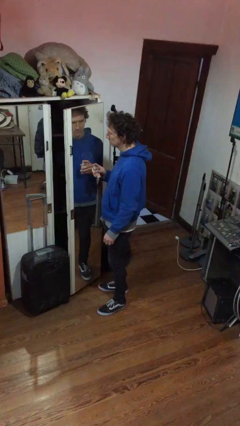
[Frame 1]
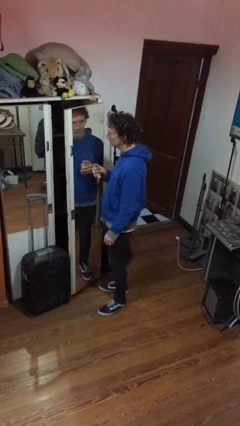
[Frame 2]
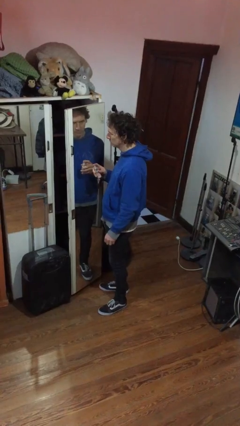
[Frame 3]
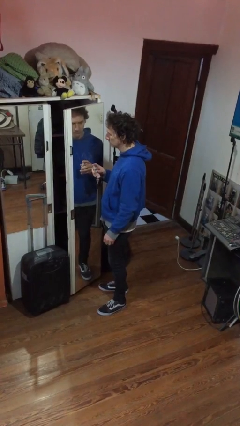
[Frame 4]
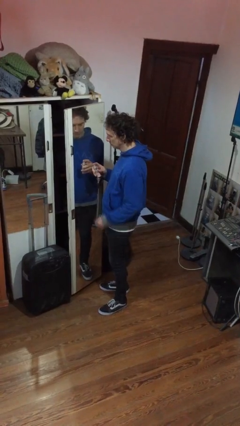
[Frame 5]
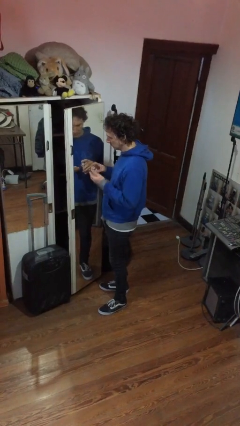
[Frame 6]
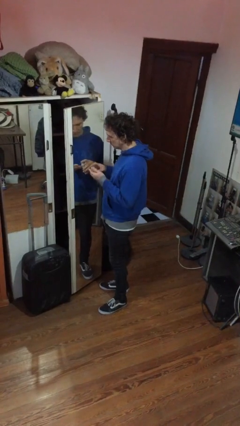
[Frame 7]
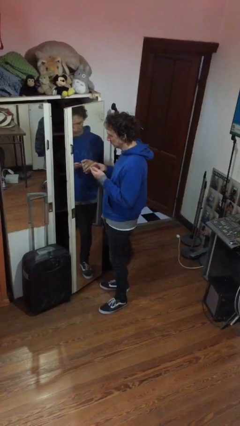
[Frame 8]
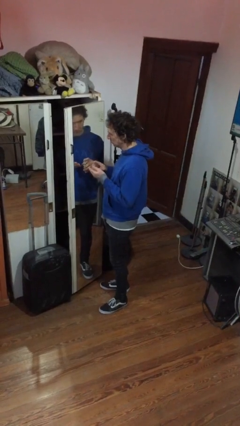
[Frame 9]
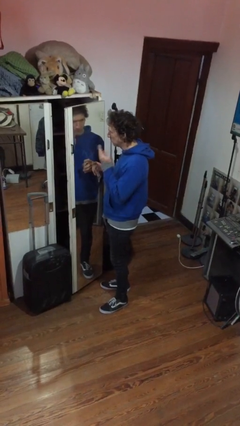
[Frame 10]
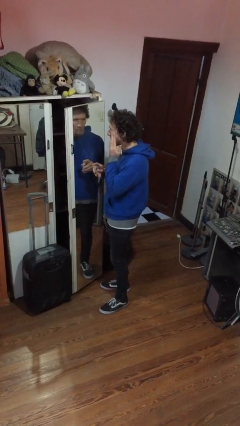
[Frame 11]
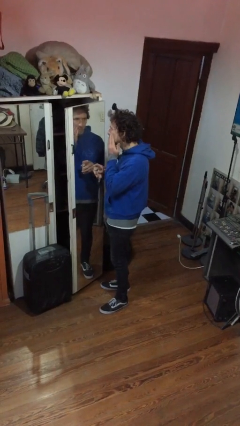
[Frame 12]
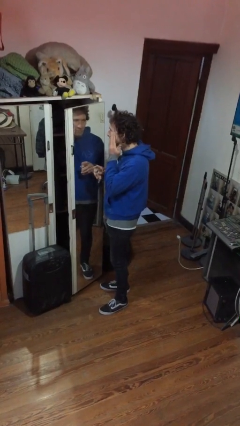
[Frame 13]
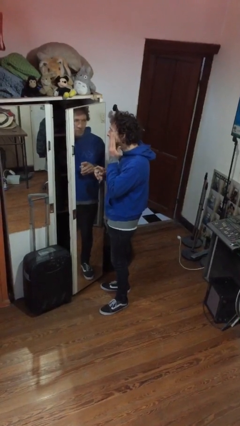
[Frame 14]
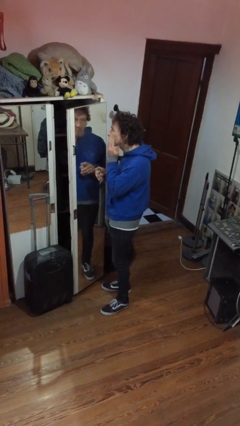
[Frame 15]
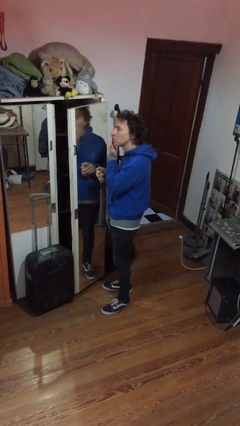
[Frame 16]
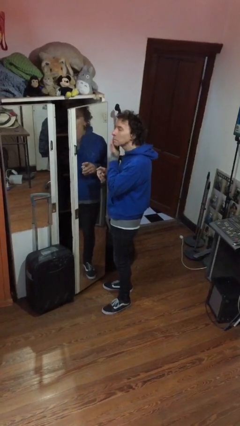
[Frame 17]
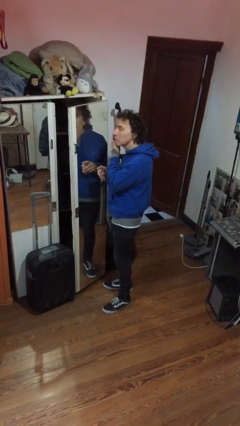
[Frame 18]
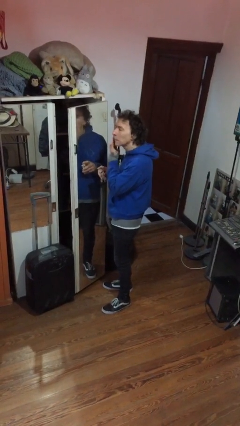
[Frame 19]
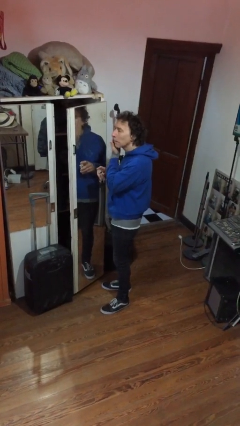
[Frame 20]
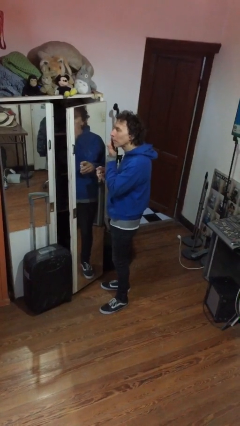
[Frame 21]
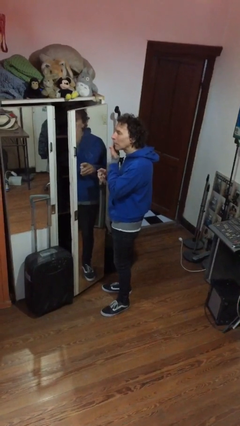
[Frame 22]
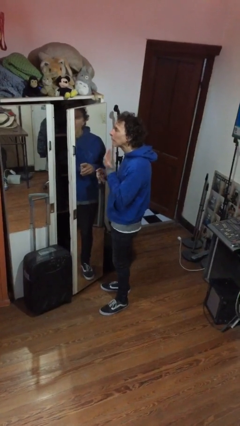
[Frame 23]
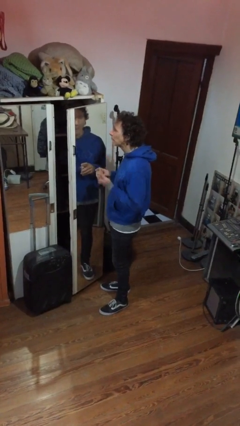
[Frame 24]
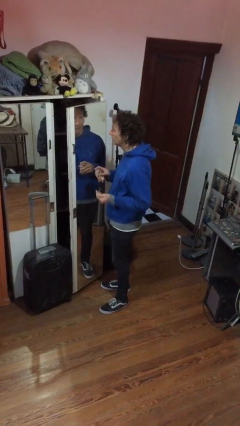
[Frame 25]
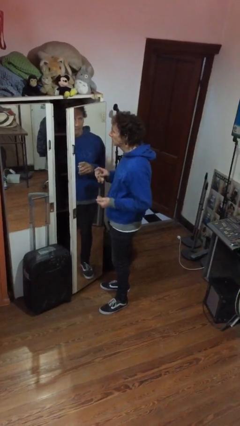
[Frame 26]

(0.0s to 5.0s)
person applies foundation makeup

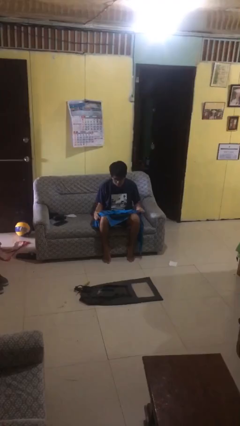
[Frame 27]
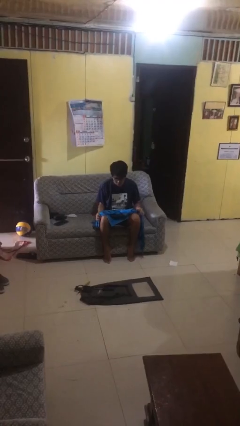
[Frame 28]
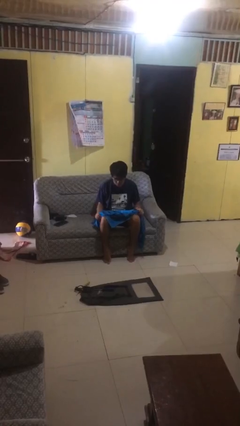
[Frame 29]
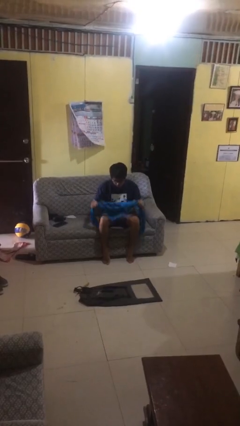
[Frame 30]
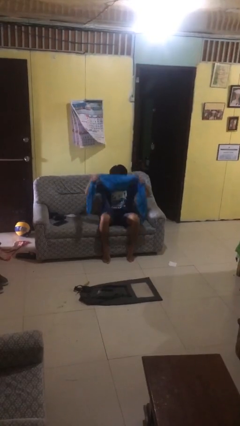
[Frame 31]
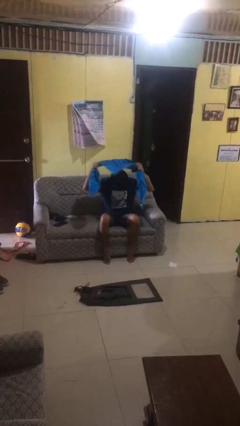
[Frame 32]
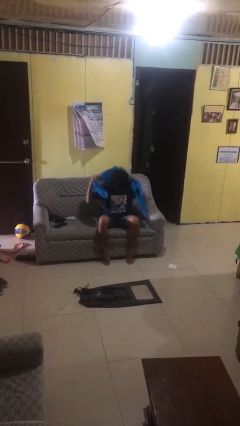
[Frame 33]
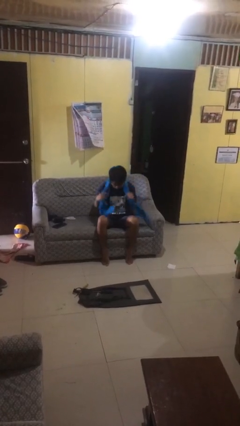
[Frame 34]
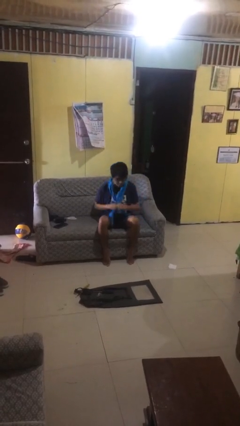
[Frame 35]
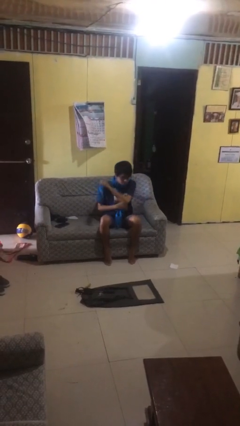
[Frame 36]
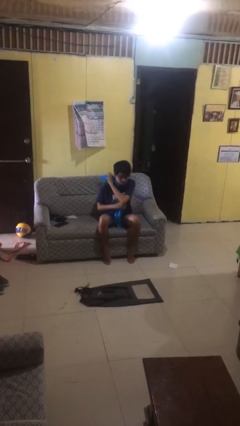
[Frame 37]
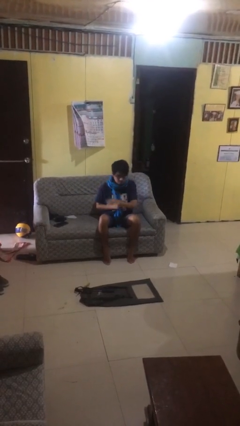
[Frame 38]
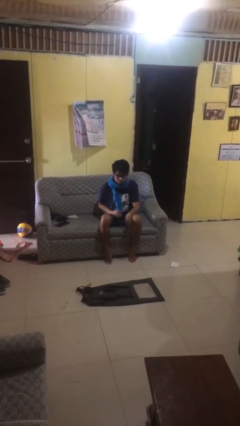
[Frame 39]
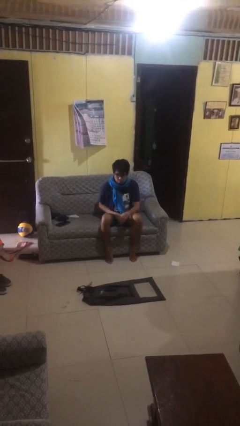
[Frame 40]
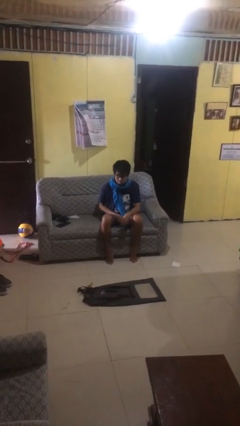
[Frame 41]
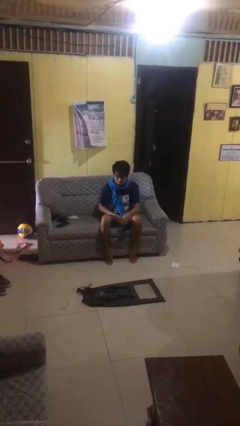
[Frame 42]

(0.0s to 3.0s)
person puts on scarf

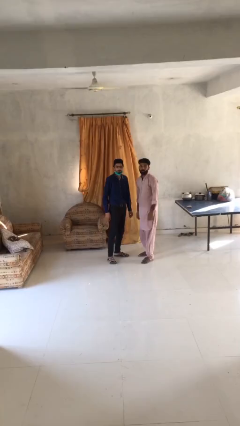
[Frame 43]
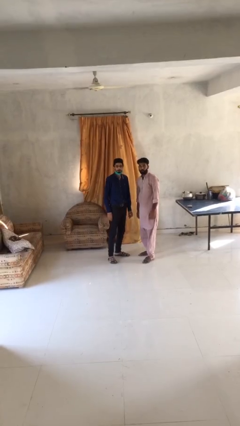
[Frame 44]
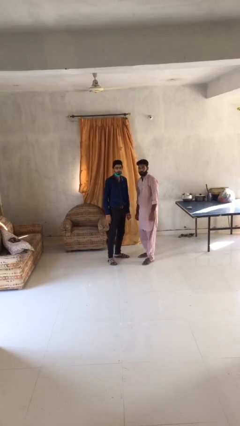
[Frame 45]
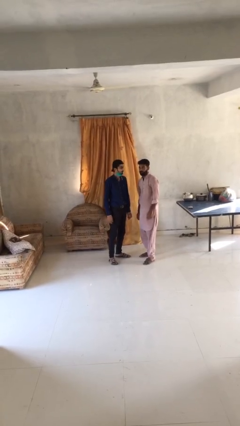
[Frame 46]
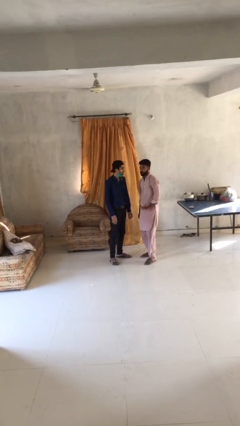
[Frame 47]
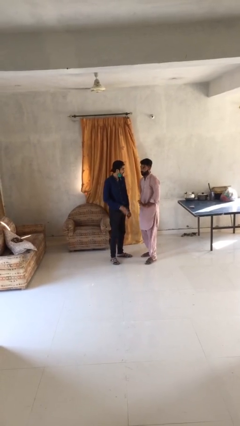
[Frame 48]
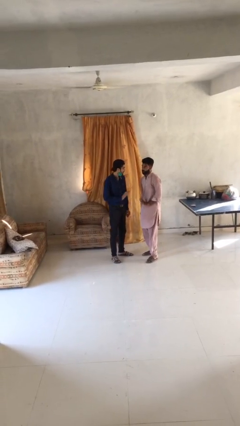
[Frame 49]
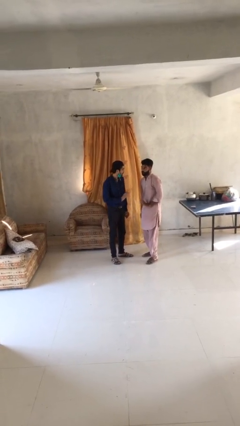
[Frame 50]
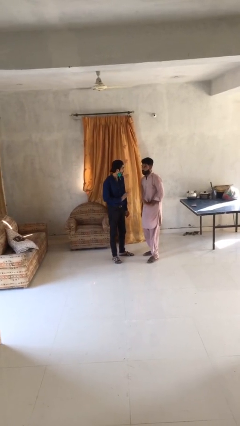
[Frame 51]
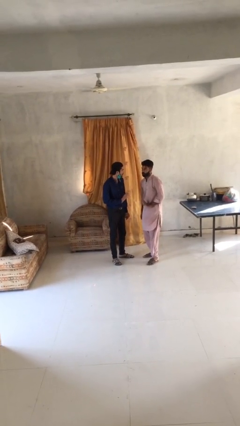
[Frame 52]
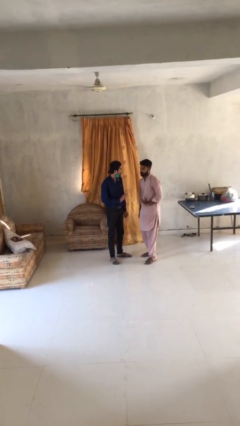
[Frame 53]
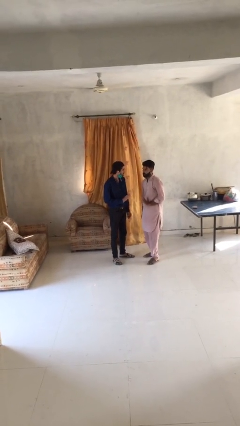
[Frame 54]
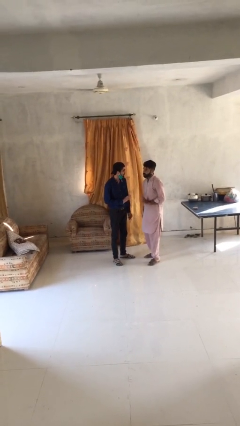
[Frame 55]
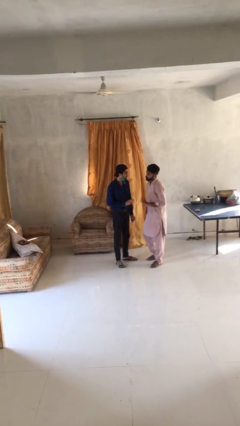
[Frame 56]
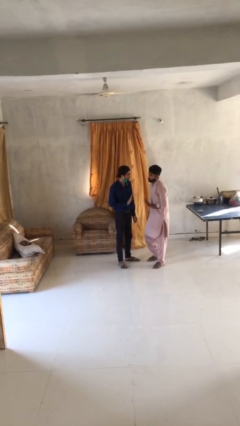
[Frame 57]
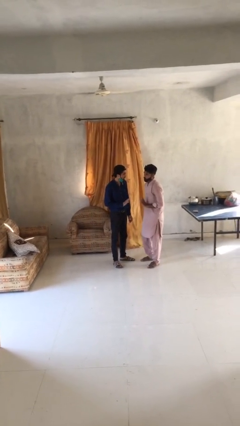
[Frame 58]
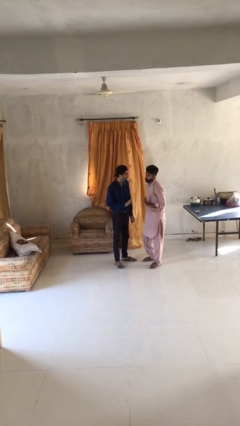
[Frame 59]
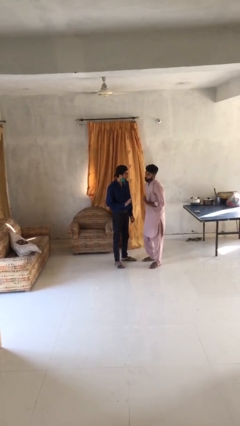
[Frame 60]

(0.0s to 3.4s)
person talks to person

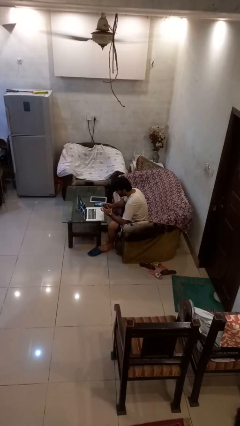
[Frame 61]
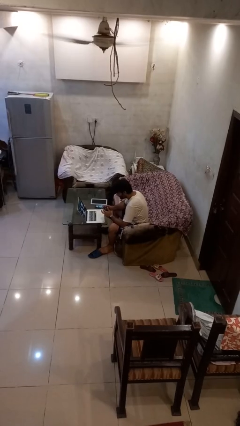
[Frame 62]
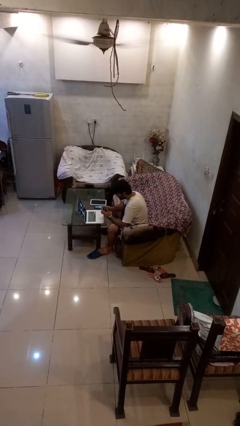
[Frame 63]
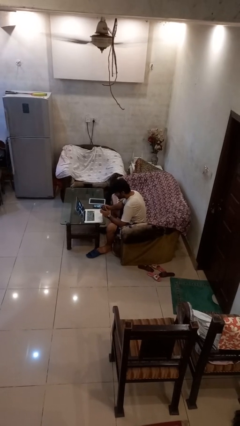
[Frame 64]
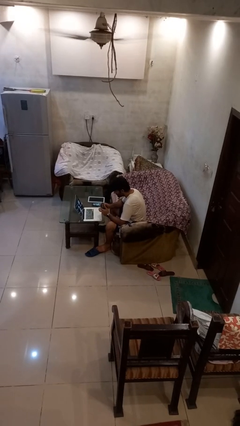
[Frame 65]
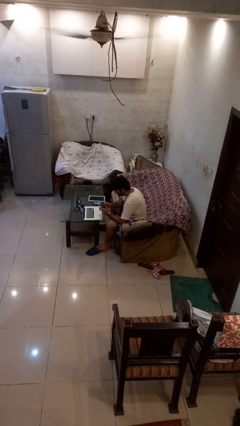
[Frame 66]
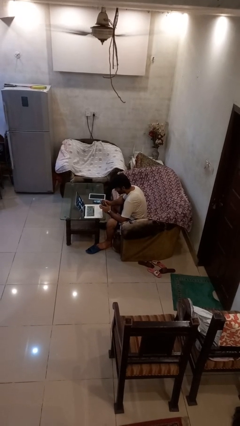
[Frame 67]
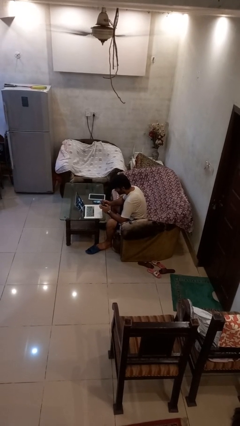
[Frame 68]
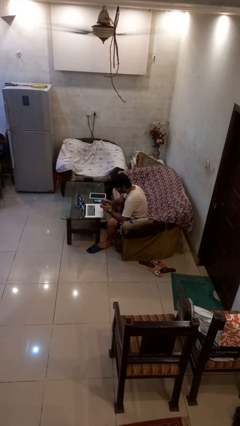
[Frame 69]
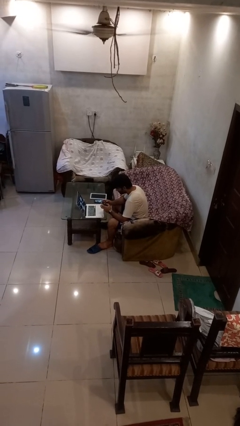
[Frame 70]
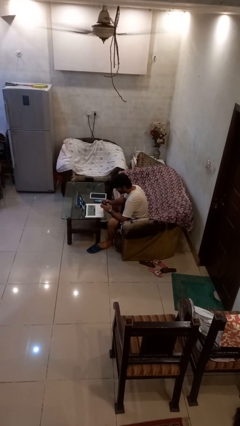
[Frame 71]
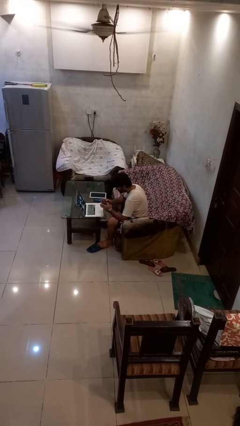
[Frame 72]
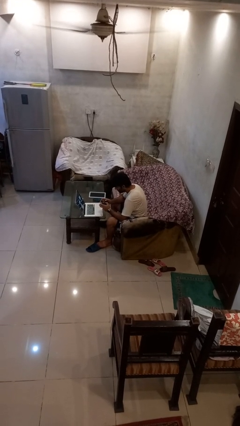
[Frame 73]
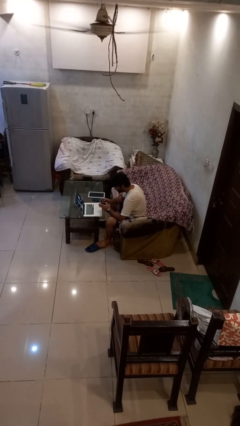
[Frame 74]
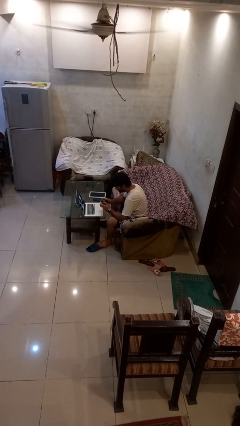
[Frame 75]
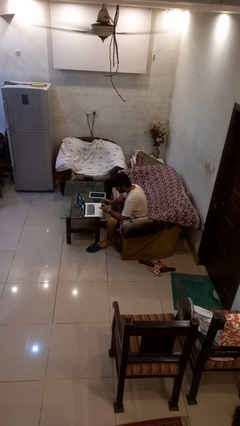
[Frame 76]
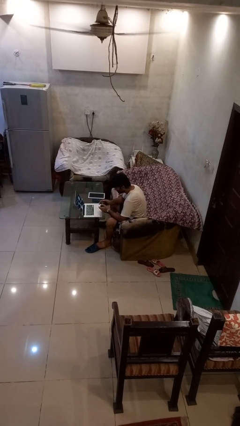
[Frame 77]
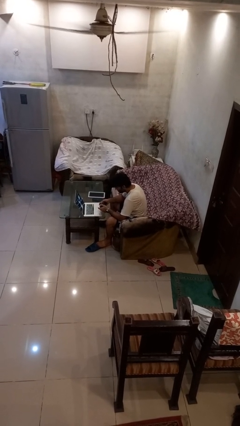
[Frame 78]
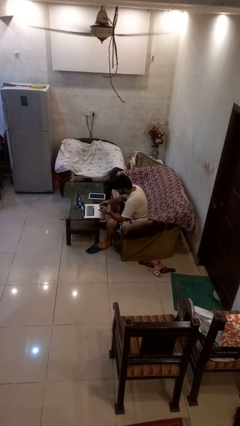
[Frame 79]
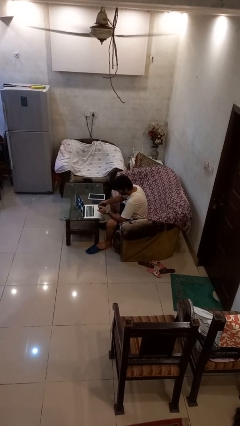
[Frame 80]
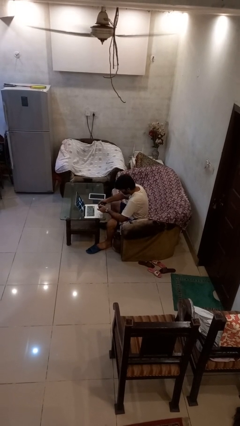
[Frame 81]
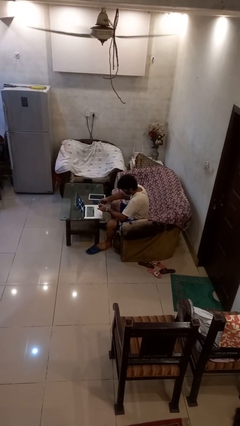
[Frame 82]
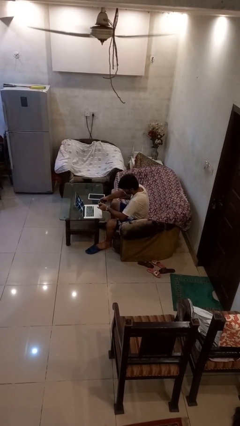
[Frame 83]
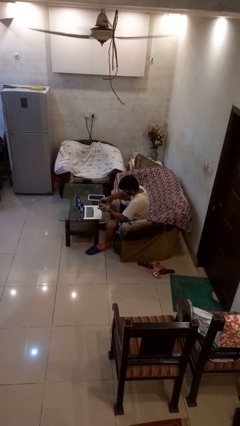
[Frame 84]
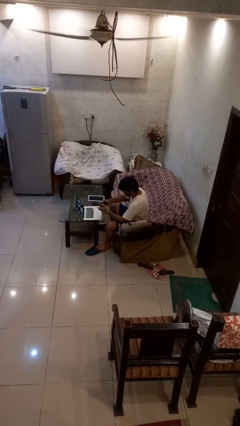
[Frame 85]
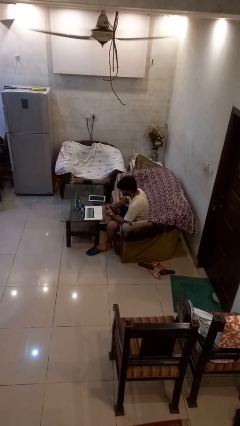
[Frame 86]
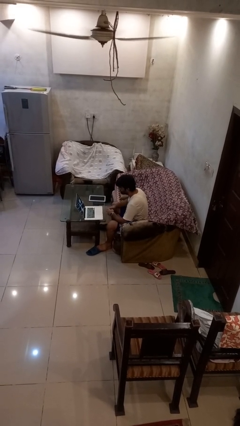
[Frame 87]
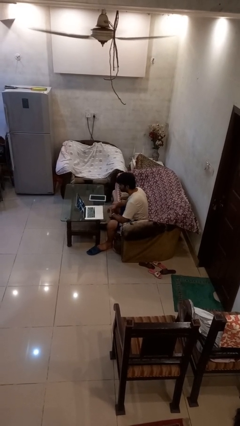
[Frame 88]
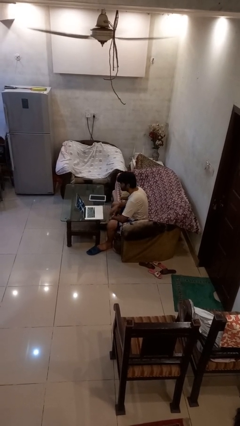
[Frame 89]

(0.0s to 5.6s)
person interacts with handheld game

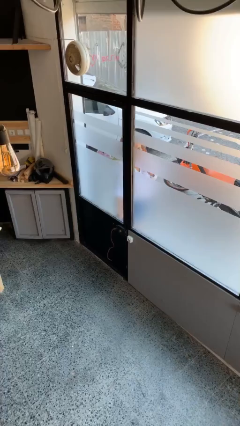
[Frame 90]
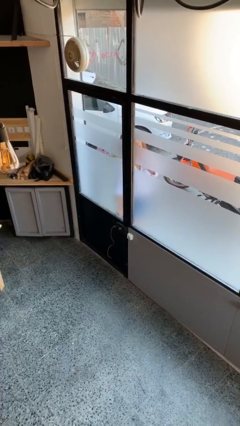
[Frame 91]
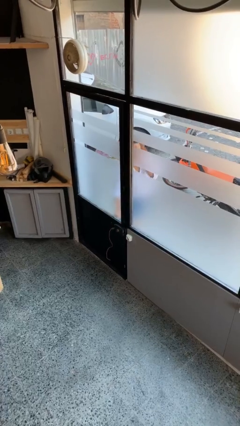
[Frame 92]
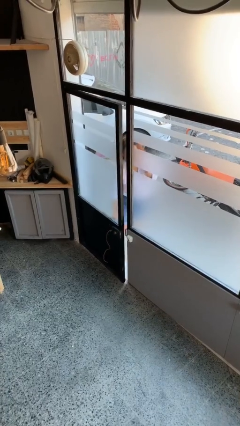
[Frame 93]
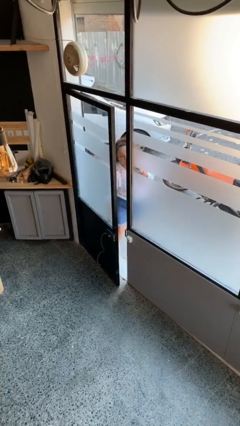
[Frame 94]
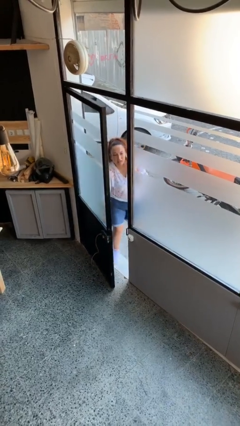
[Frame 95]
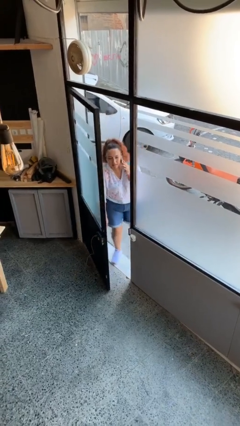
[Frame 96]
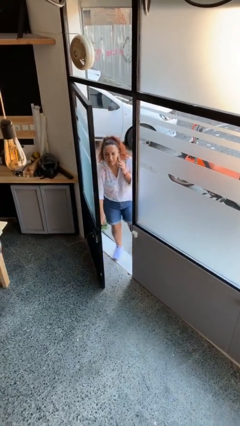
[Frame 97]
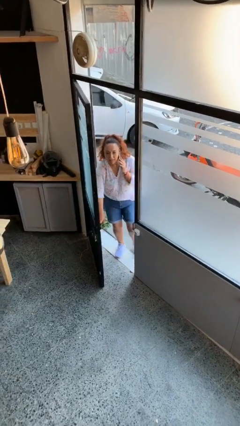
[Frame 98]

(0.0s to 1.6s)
person opens facility door
